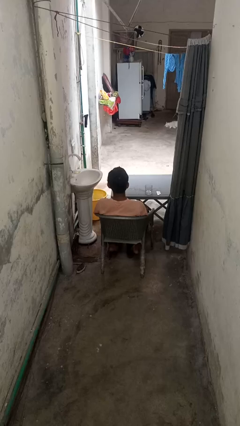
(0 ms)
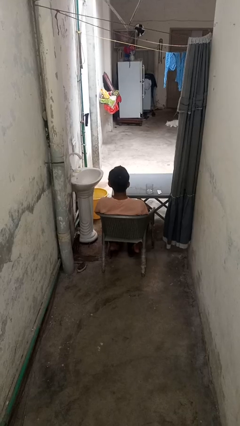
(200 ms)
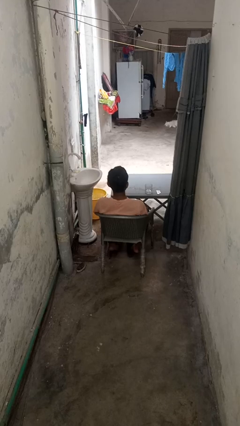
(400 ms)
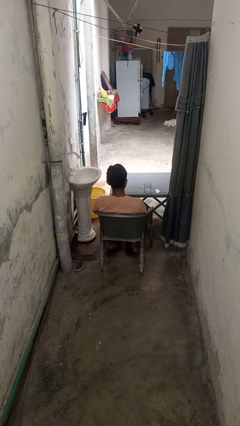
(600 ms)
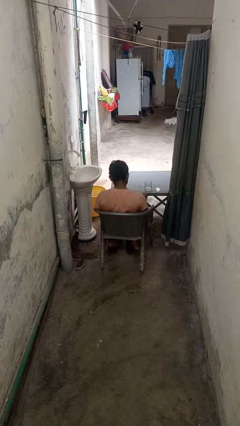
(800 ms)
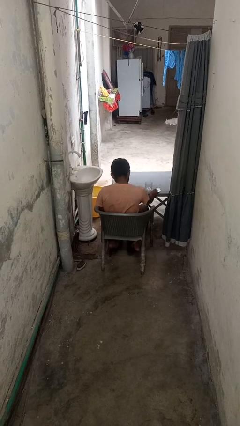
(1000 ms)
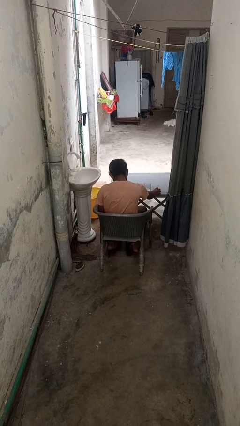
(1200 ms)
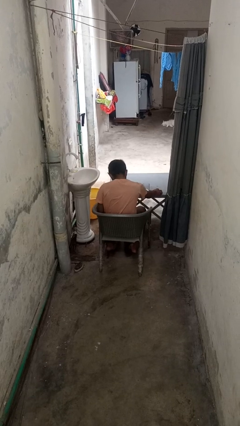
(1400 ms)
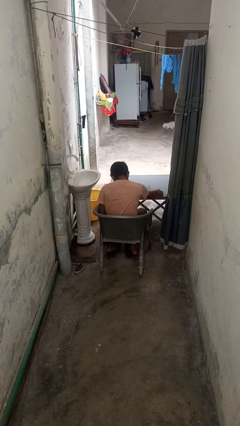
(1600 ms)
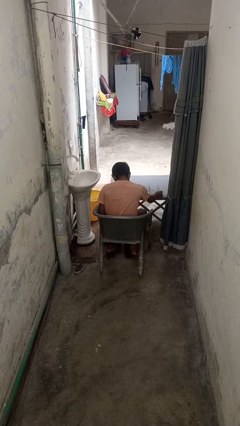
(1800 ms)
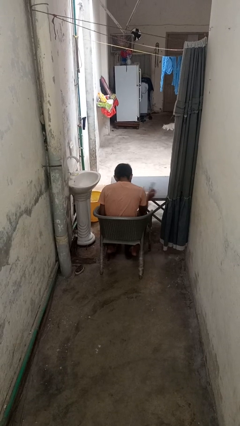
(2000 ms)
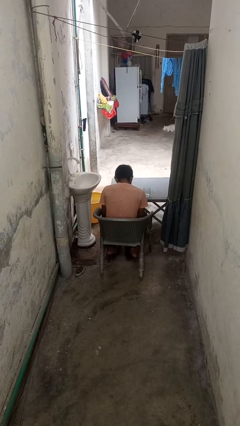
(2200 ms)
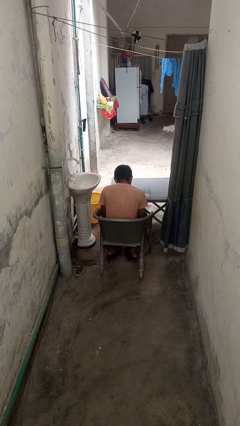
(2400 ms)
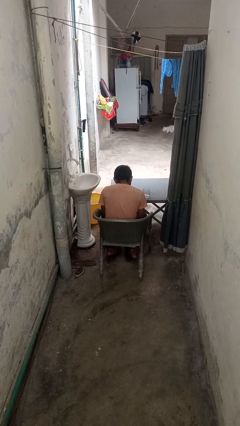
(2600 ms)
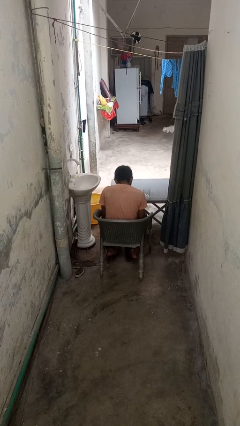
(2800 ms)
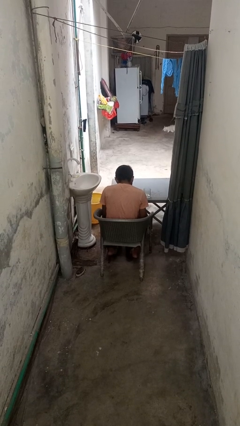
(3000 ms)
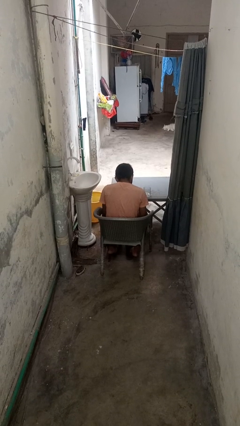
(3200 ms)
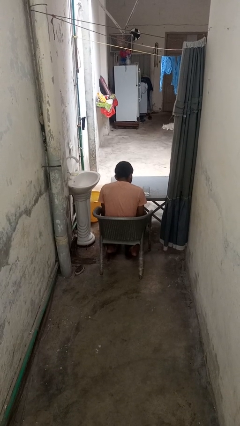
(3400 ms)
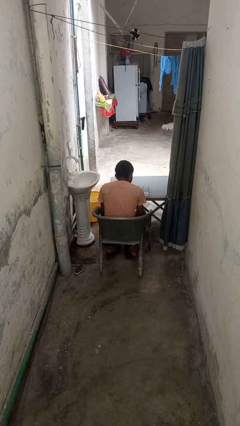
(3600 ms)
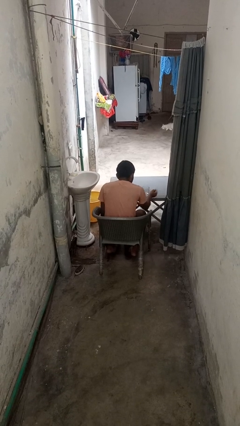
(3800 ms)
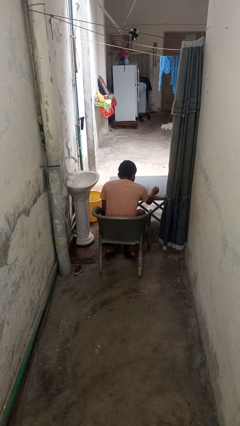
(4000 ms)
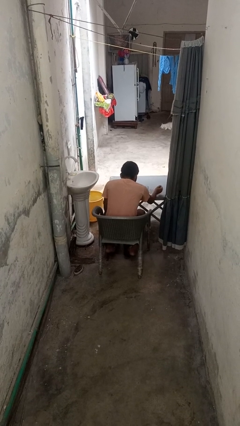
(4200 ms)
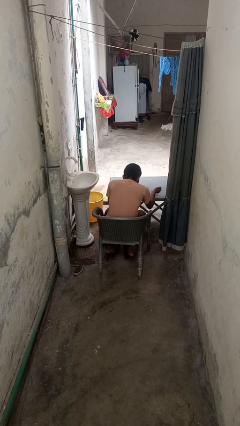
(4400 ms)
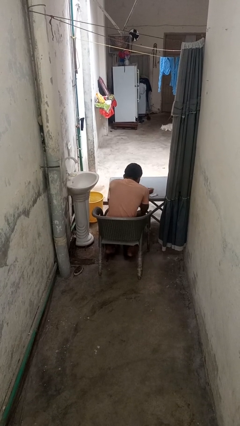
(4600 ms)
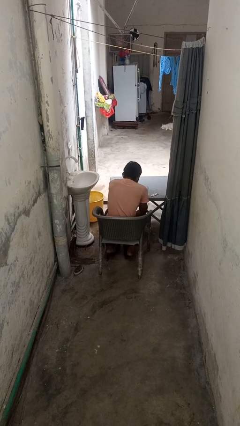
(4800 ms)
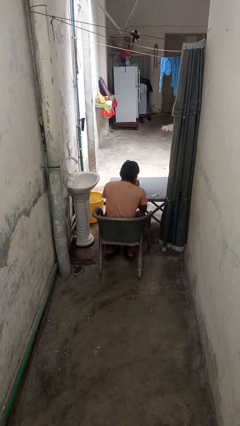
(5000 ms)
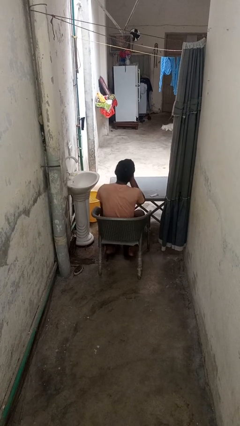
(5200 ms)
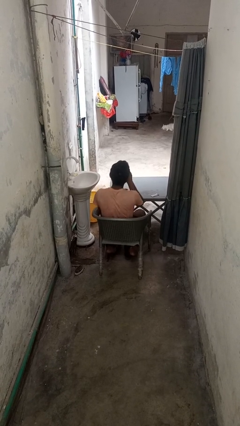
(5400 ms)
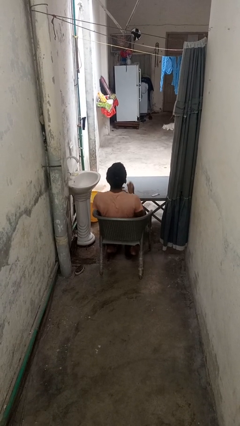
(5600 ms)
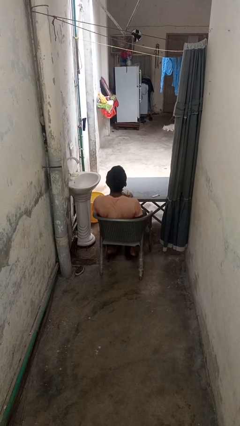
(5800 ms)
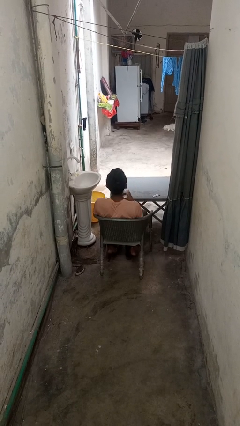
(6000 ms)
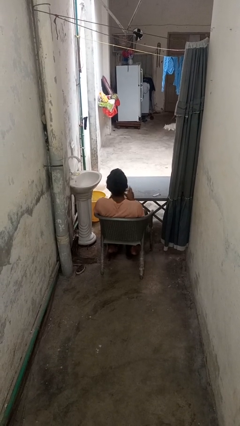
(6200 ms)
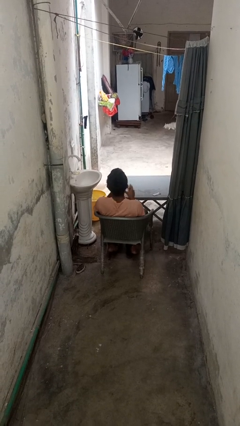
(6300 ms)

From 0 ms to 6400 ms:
person takes medicine pills

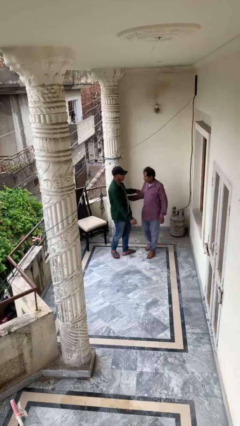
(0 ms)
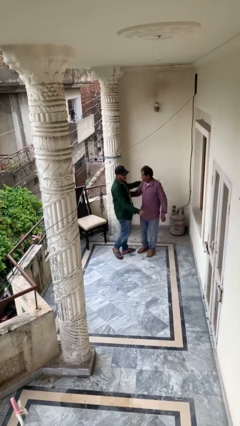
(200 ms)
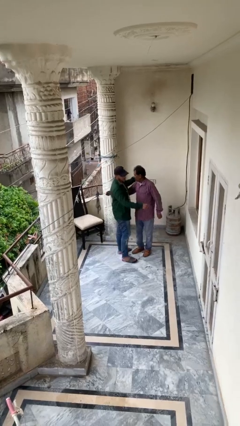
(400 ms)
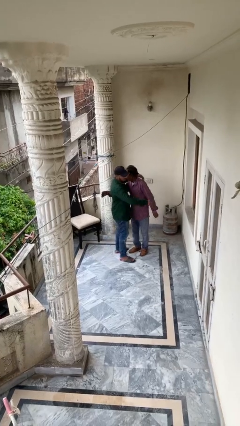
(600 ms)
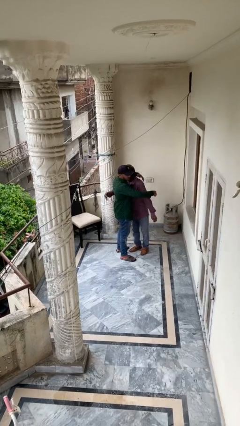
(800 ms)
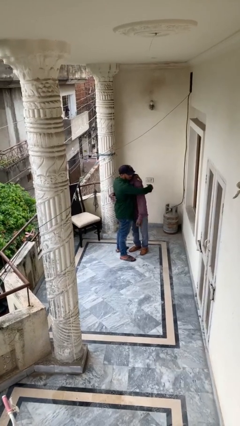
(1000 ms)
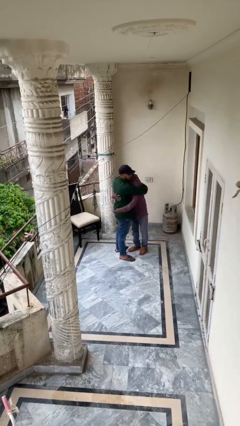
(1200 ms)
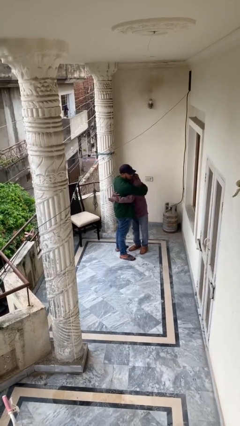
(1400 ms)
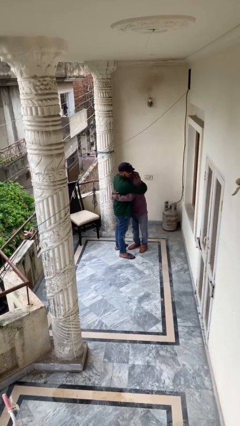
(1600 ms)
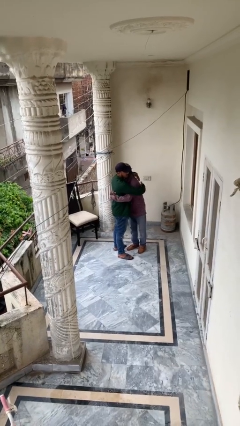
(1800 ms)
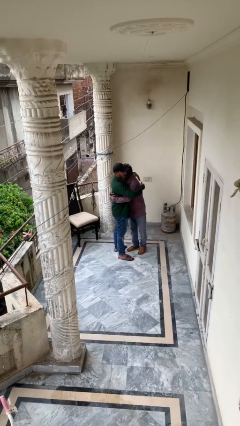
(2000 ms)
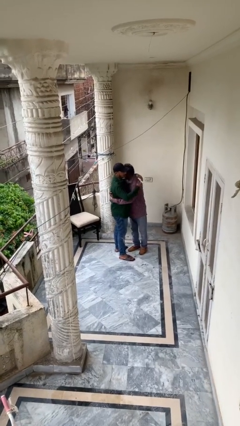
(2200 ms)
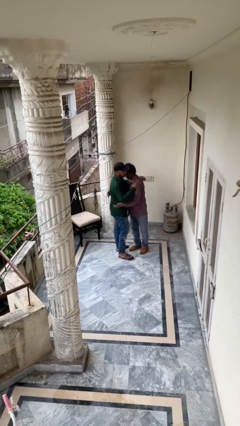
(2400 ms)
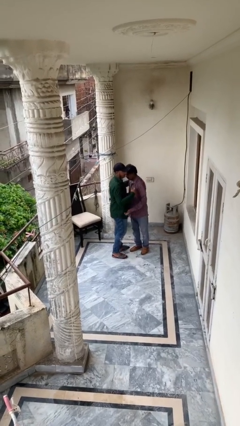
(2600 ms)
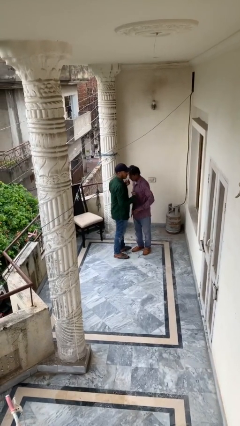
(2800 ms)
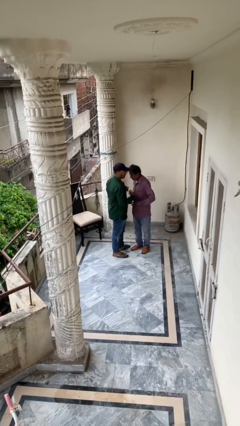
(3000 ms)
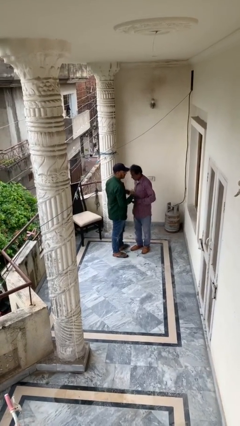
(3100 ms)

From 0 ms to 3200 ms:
person embraces person

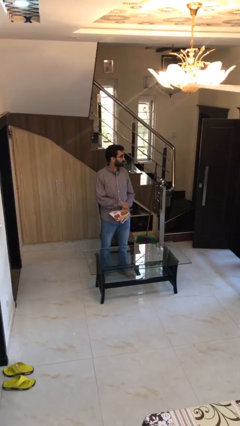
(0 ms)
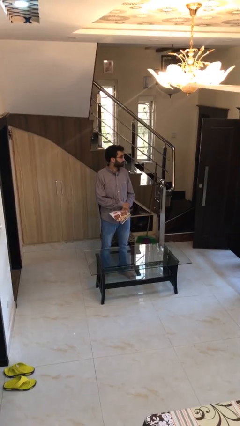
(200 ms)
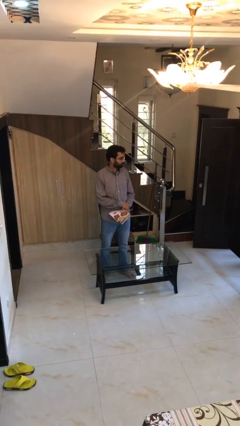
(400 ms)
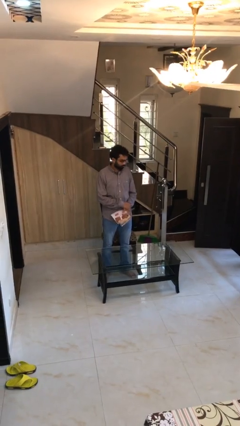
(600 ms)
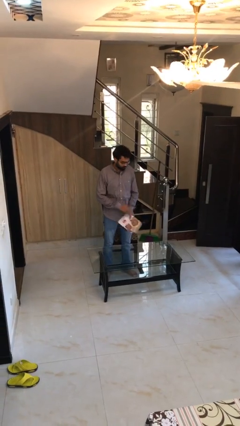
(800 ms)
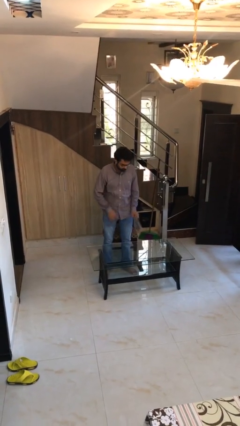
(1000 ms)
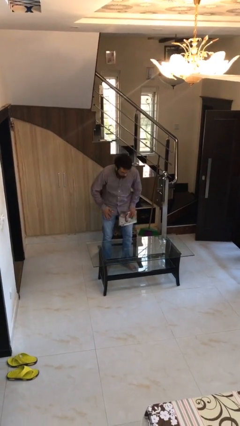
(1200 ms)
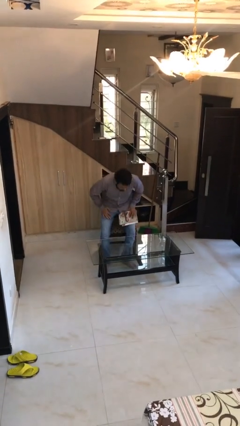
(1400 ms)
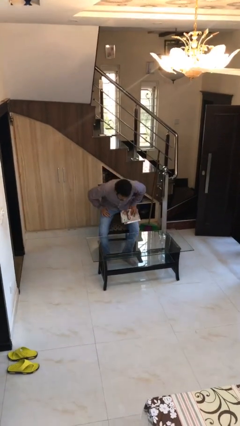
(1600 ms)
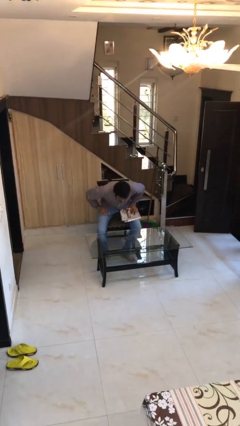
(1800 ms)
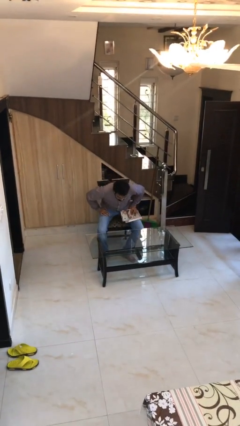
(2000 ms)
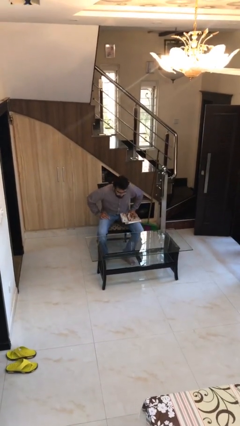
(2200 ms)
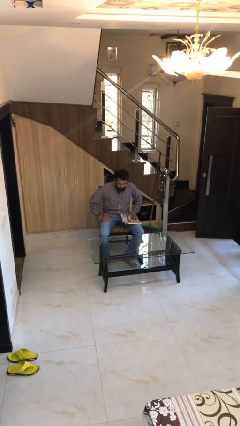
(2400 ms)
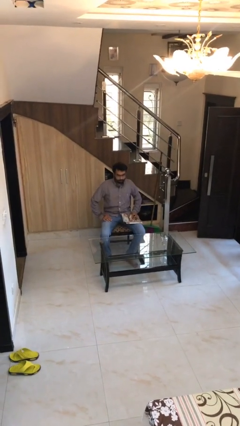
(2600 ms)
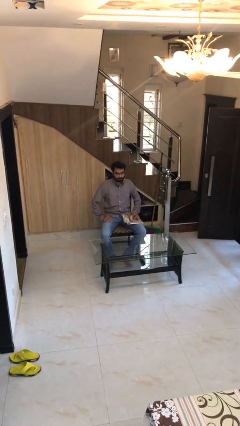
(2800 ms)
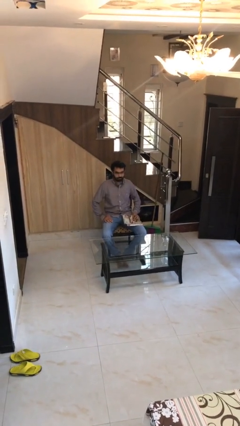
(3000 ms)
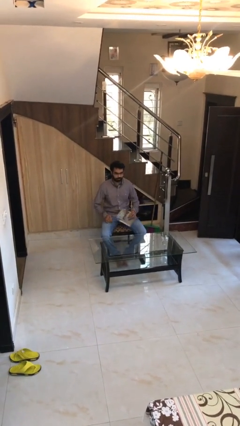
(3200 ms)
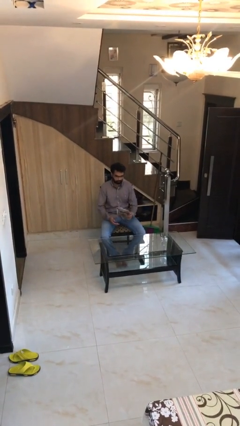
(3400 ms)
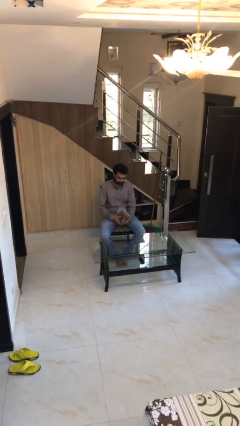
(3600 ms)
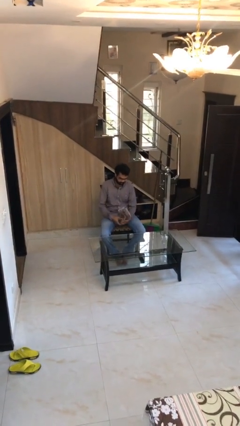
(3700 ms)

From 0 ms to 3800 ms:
person sits down

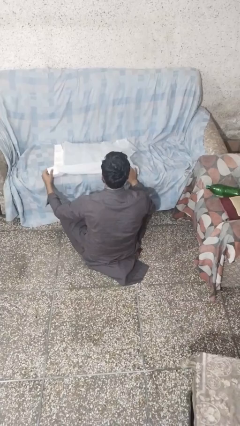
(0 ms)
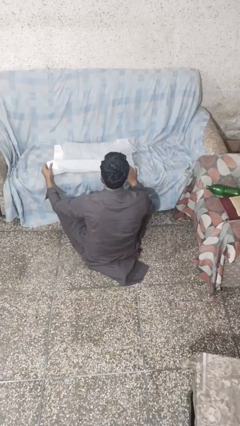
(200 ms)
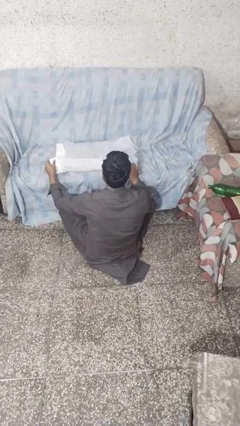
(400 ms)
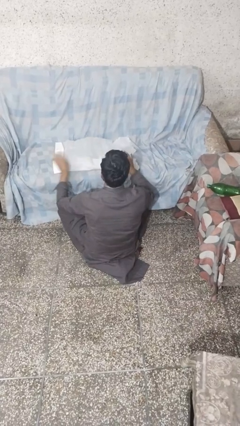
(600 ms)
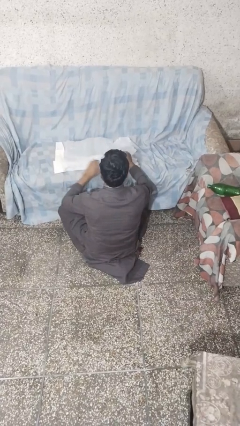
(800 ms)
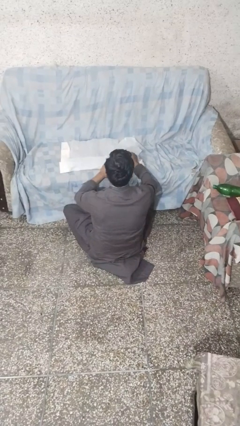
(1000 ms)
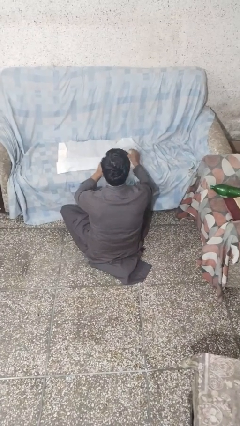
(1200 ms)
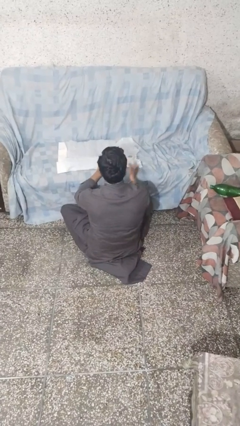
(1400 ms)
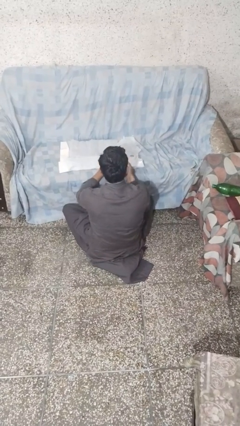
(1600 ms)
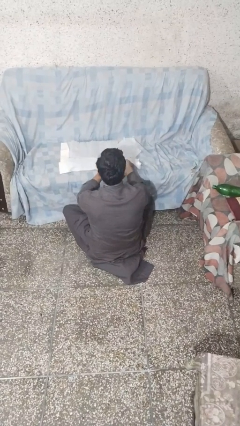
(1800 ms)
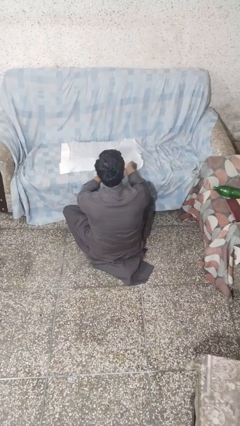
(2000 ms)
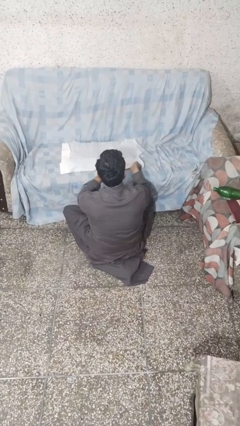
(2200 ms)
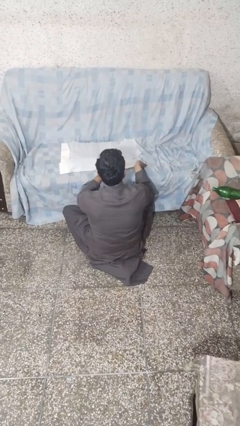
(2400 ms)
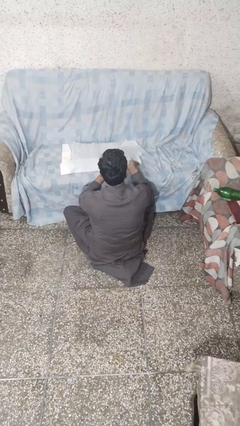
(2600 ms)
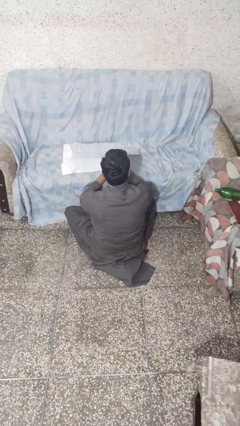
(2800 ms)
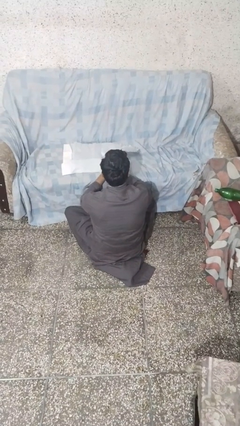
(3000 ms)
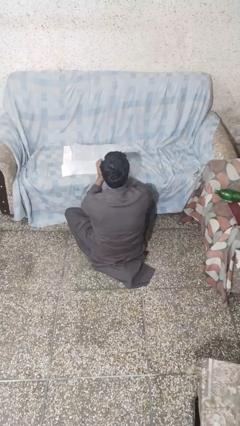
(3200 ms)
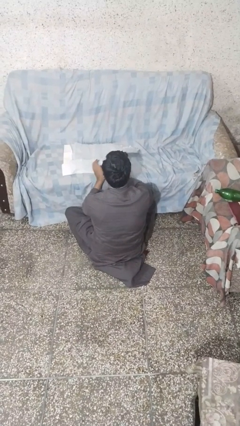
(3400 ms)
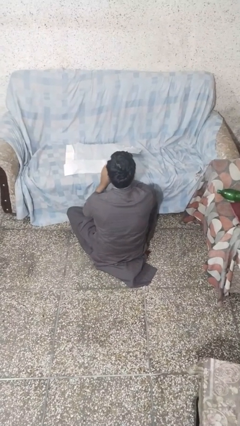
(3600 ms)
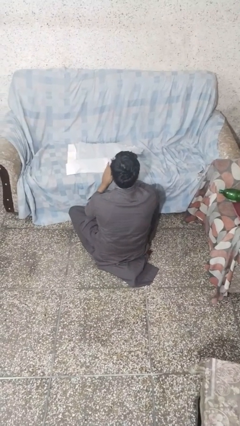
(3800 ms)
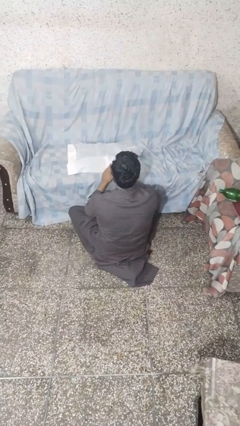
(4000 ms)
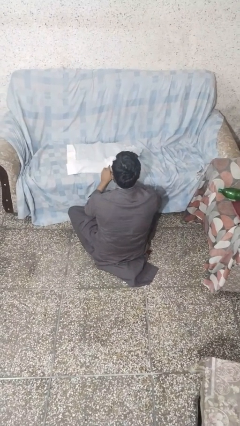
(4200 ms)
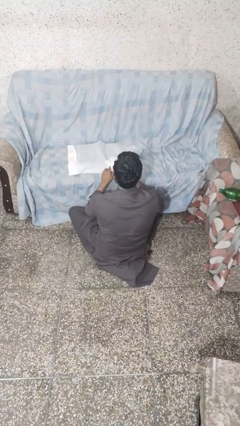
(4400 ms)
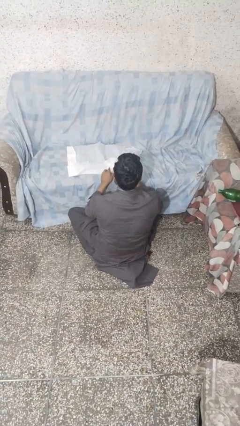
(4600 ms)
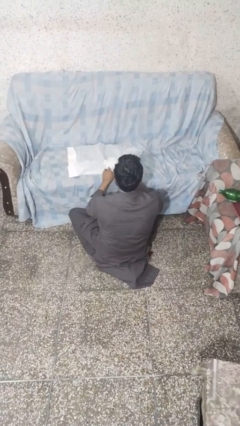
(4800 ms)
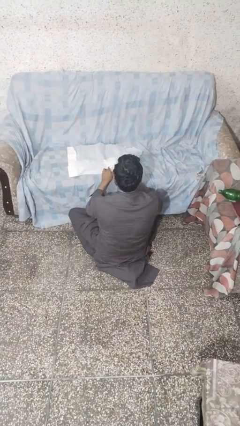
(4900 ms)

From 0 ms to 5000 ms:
person wraps box
